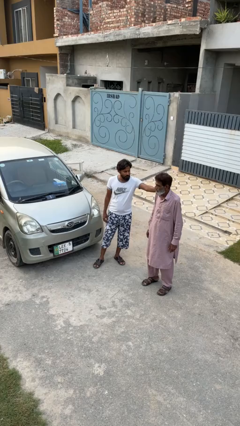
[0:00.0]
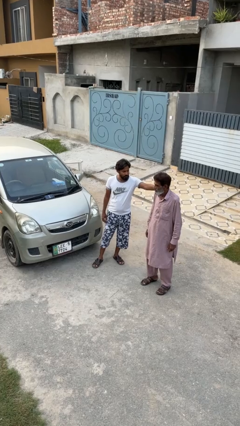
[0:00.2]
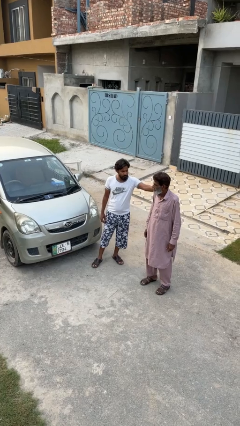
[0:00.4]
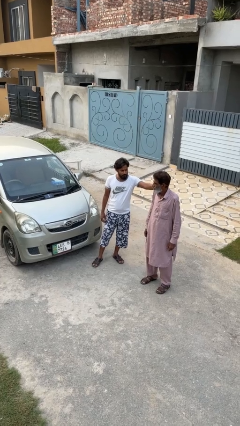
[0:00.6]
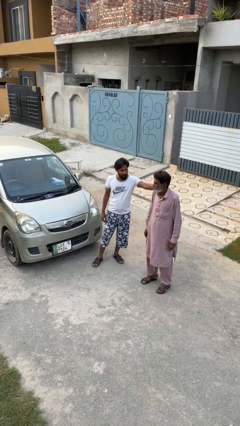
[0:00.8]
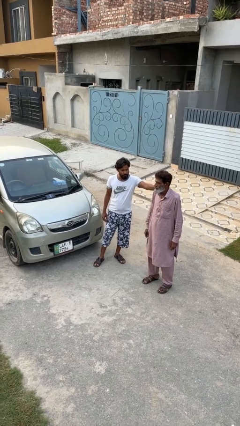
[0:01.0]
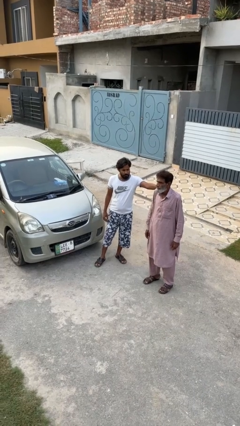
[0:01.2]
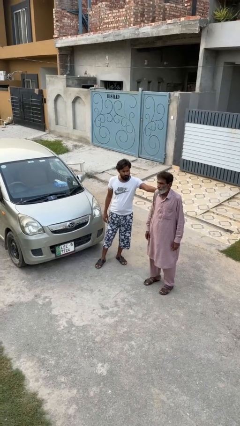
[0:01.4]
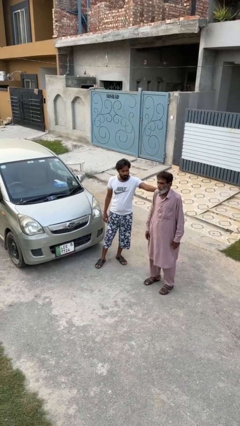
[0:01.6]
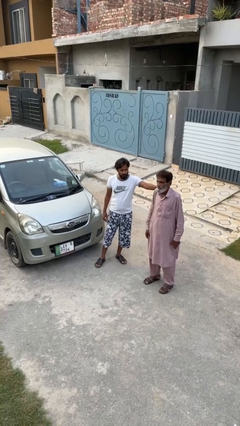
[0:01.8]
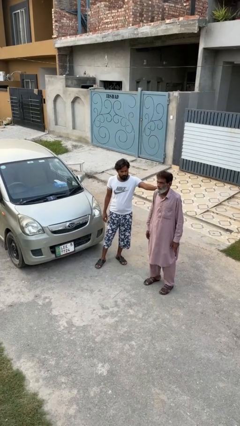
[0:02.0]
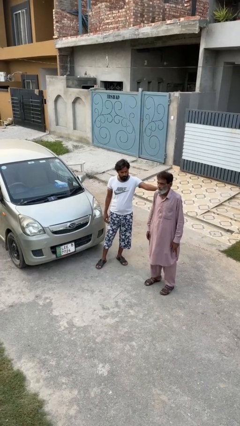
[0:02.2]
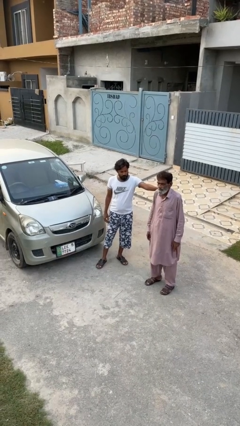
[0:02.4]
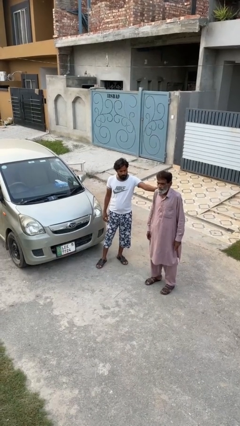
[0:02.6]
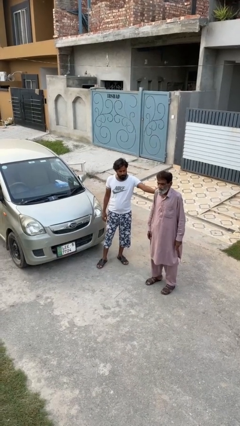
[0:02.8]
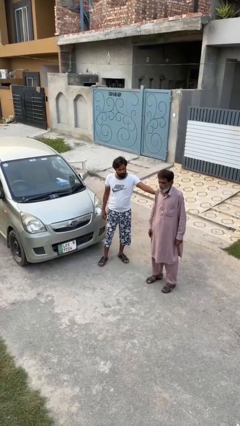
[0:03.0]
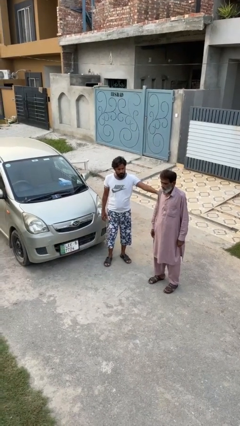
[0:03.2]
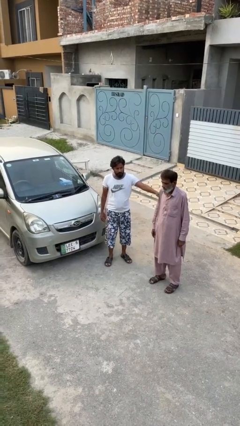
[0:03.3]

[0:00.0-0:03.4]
person pounds shoulders of person

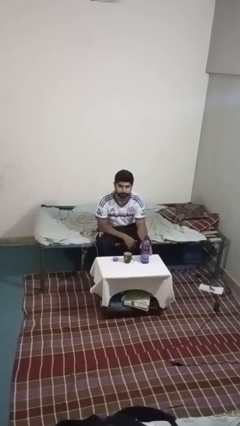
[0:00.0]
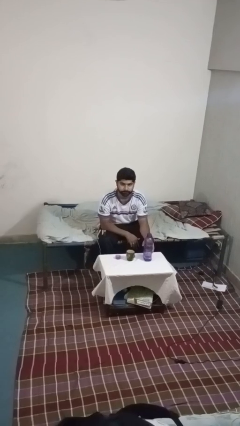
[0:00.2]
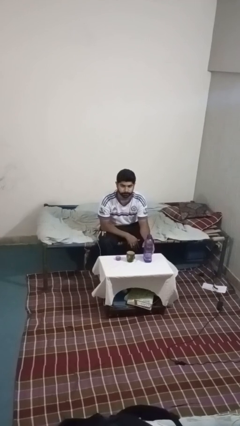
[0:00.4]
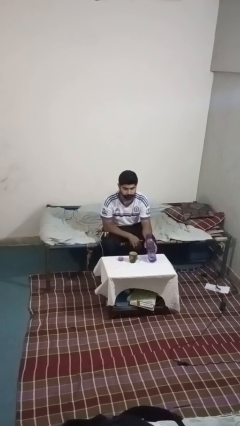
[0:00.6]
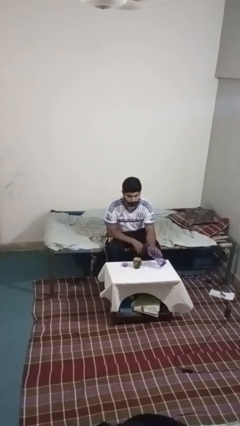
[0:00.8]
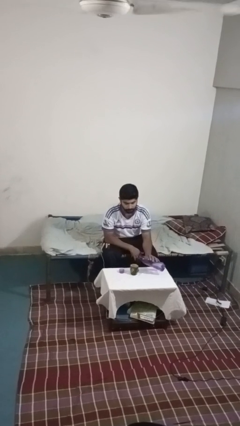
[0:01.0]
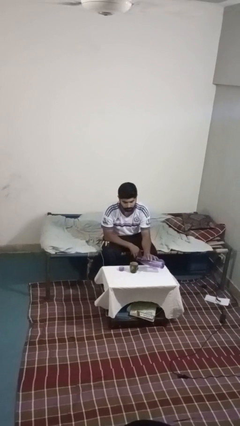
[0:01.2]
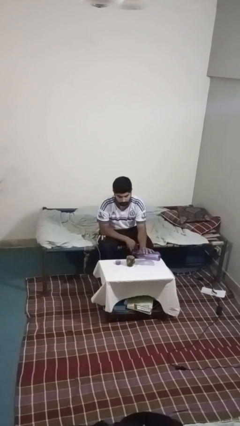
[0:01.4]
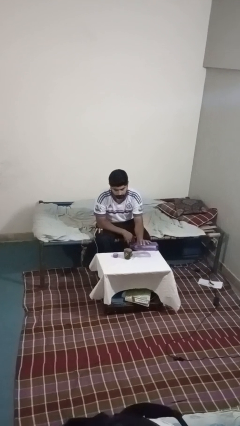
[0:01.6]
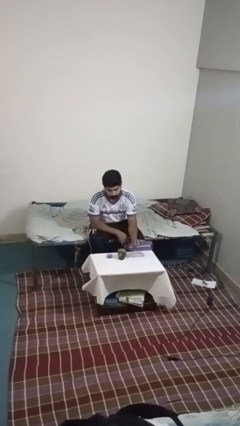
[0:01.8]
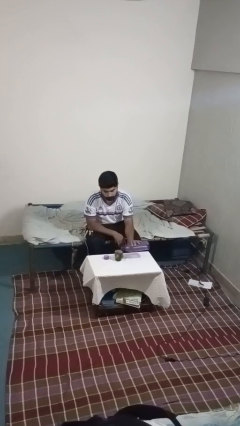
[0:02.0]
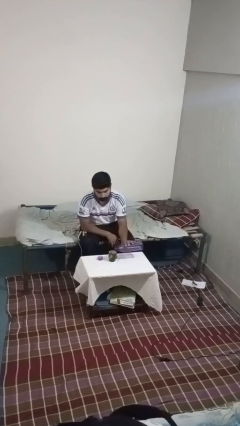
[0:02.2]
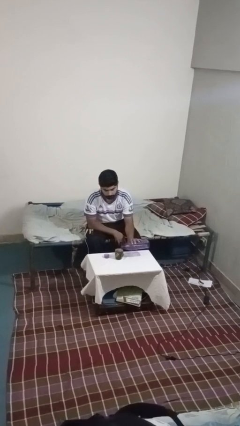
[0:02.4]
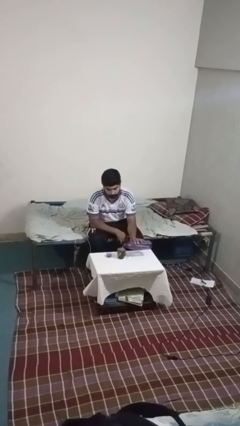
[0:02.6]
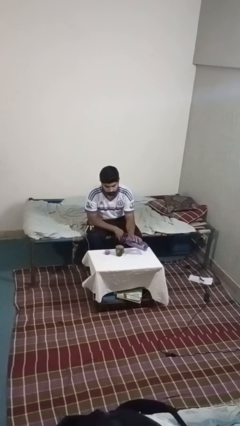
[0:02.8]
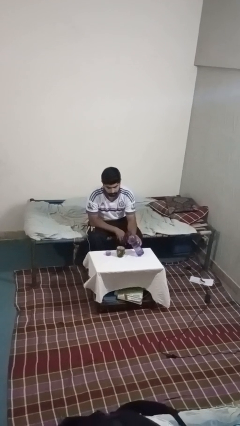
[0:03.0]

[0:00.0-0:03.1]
person pours liquid into cup

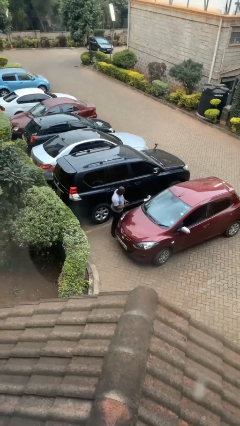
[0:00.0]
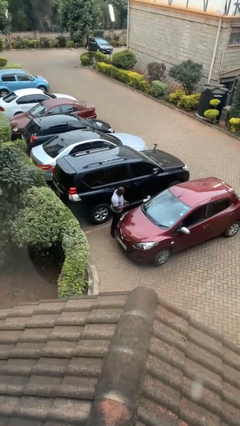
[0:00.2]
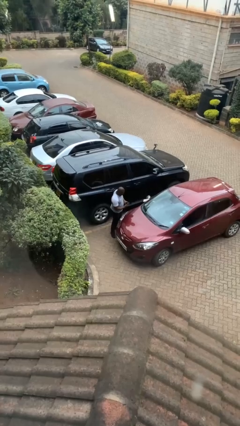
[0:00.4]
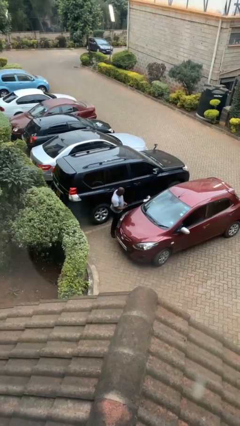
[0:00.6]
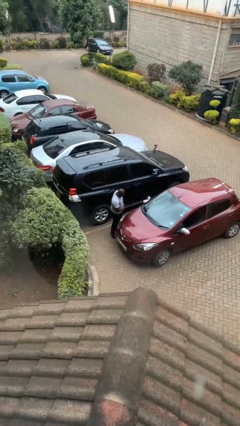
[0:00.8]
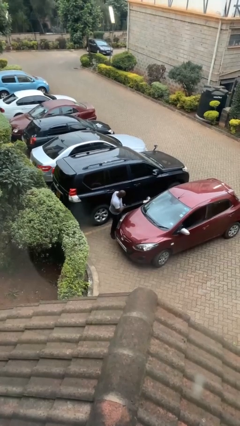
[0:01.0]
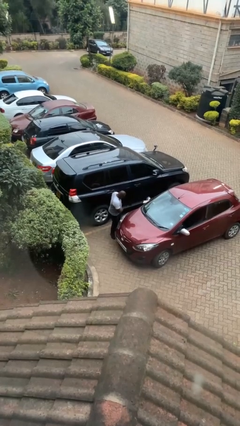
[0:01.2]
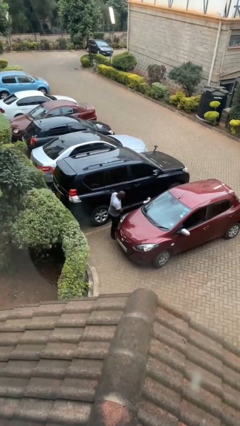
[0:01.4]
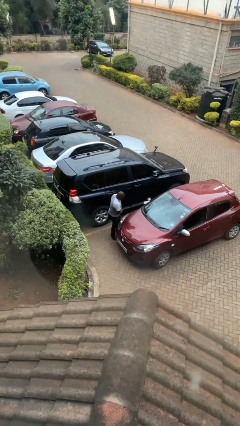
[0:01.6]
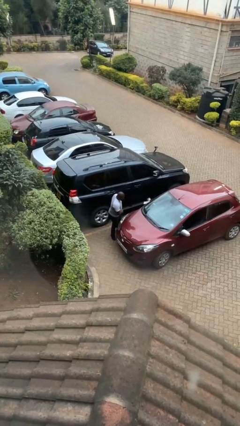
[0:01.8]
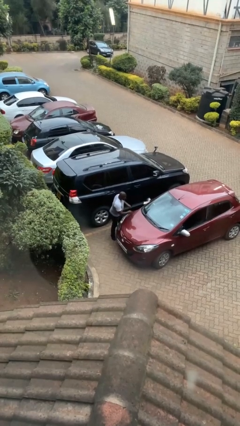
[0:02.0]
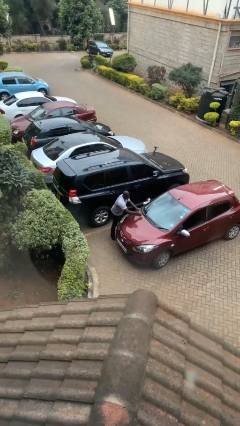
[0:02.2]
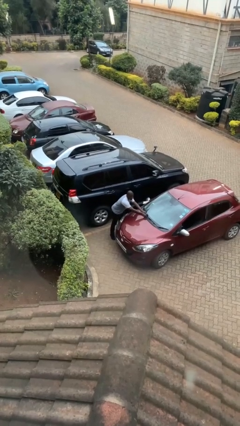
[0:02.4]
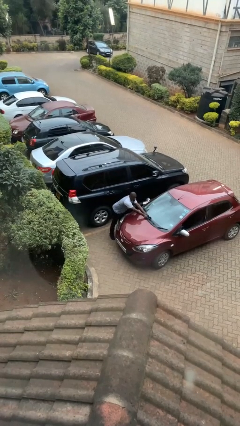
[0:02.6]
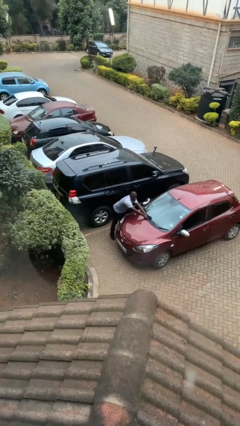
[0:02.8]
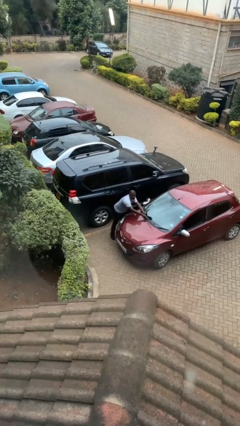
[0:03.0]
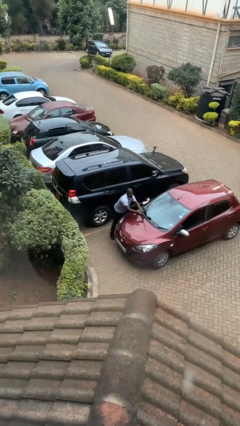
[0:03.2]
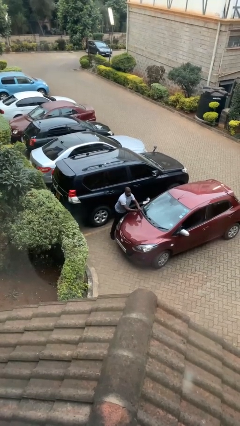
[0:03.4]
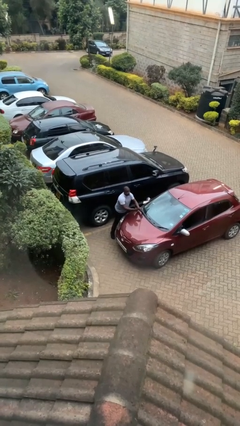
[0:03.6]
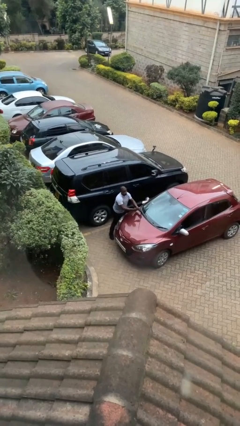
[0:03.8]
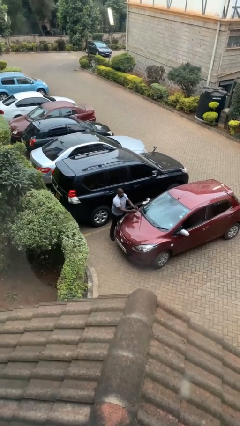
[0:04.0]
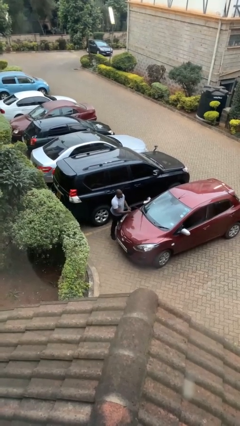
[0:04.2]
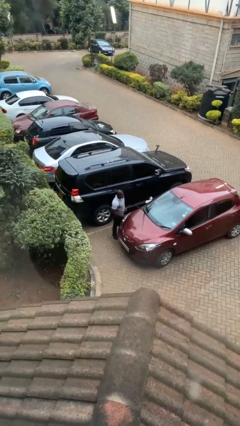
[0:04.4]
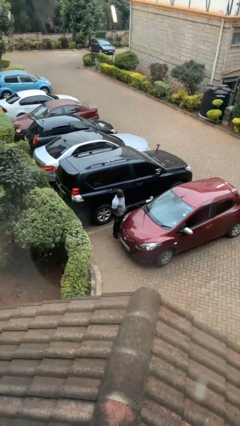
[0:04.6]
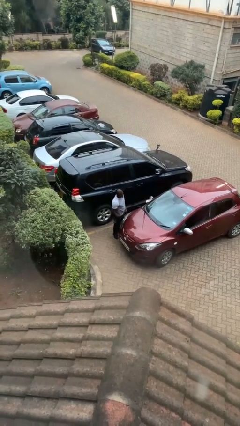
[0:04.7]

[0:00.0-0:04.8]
person flips up car wipers

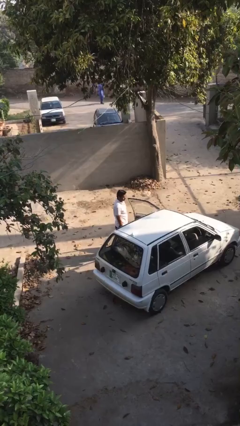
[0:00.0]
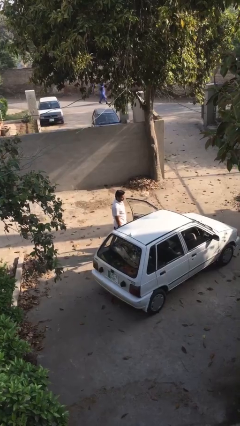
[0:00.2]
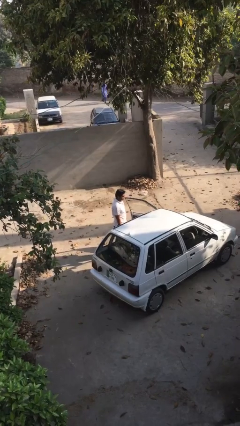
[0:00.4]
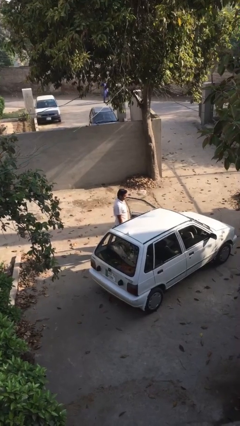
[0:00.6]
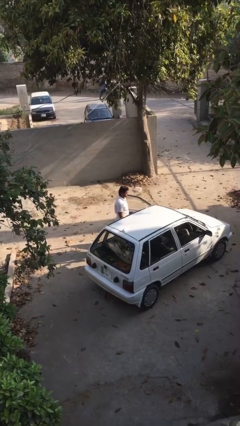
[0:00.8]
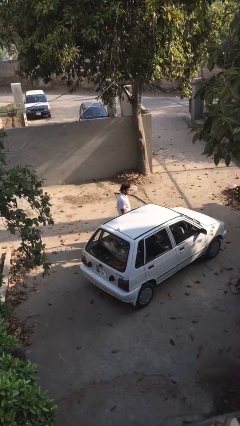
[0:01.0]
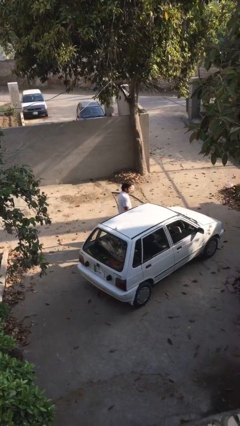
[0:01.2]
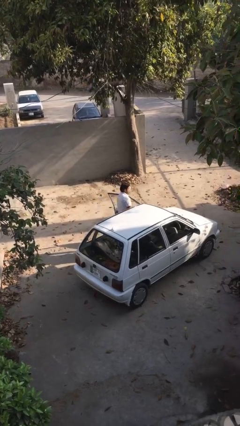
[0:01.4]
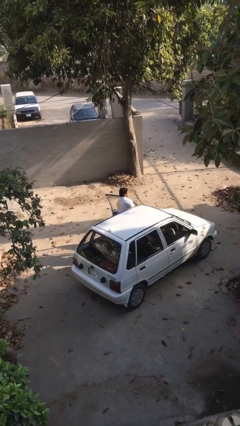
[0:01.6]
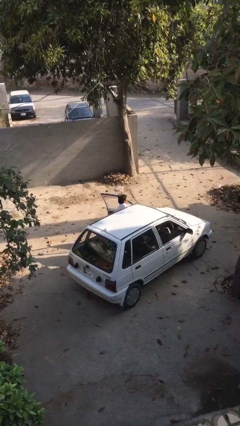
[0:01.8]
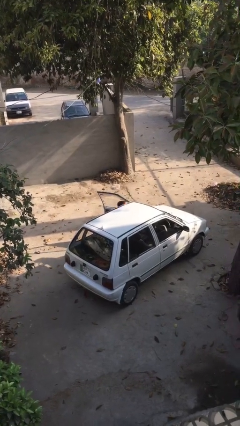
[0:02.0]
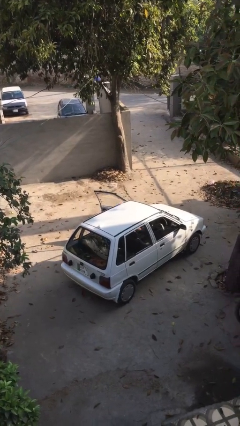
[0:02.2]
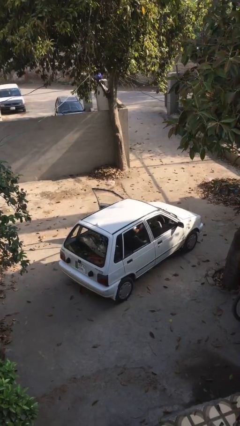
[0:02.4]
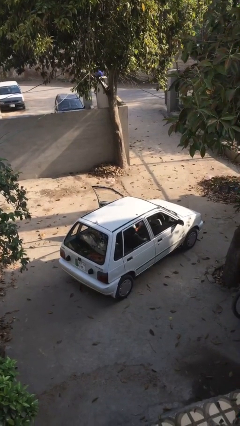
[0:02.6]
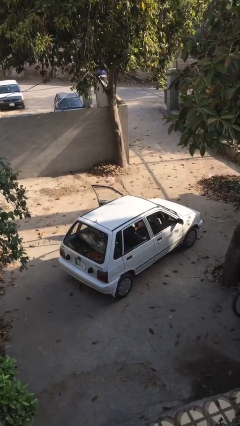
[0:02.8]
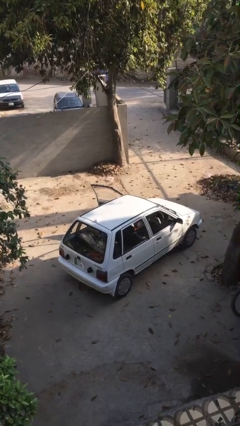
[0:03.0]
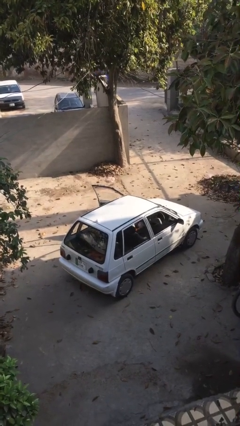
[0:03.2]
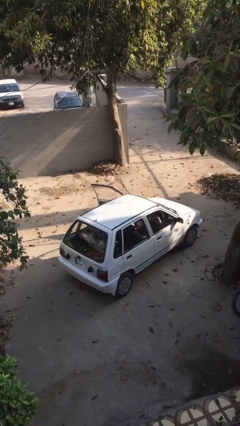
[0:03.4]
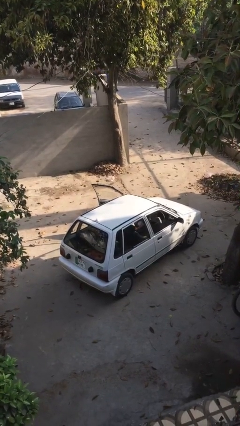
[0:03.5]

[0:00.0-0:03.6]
person enters car

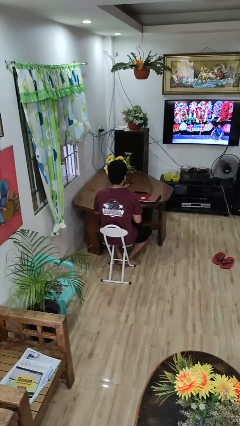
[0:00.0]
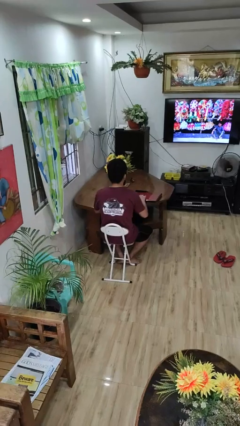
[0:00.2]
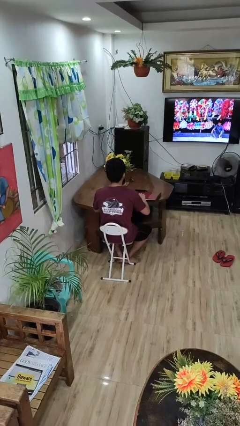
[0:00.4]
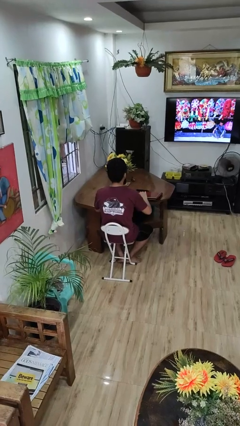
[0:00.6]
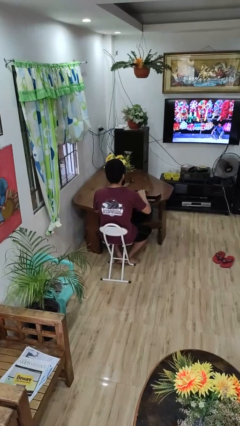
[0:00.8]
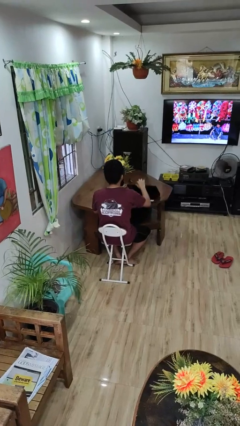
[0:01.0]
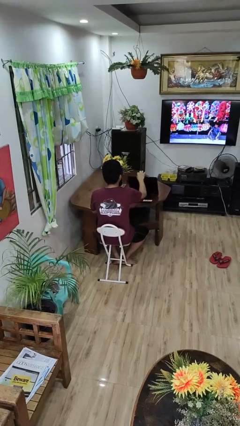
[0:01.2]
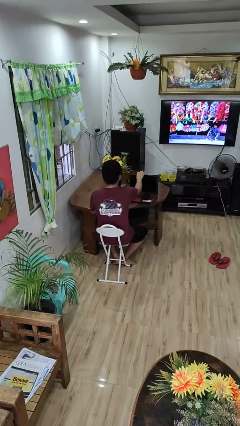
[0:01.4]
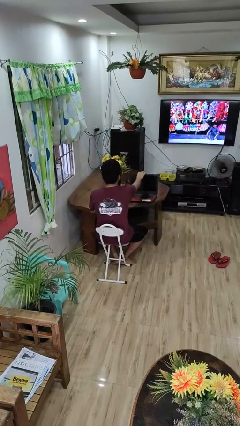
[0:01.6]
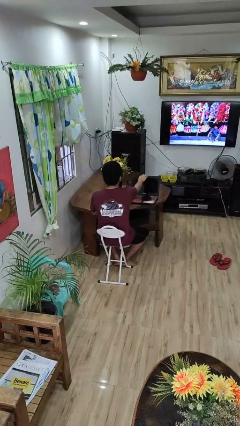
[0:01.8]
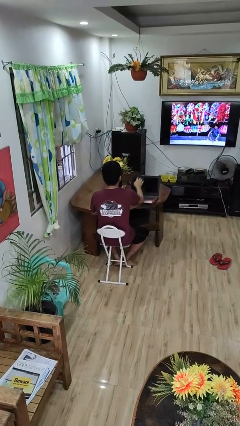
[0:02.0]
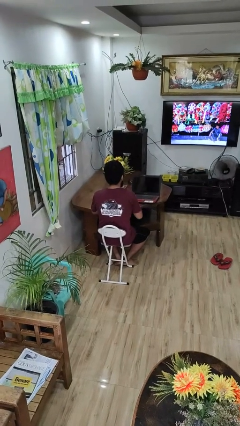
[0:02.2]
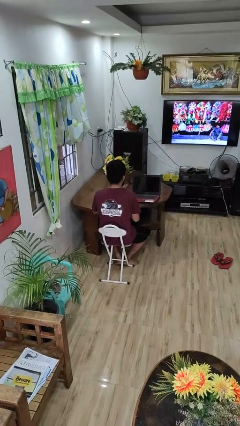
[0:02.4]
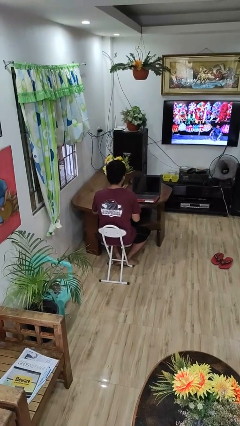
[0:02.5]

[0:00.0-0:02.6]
person opens laptop

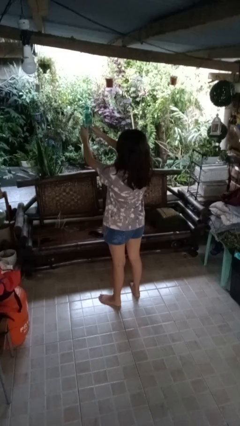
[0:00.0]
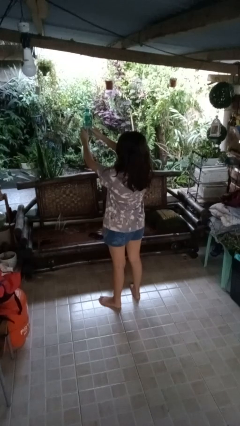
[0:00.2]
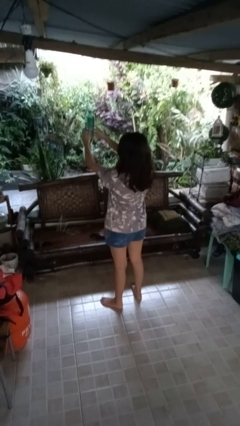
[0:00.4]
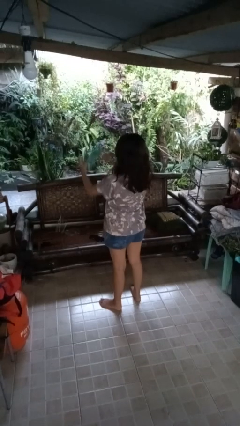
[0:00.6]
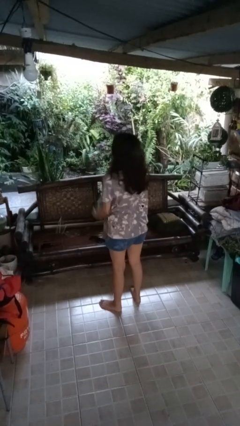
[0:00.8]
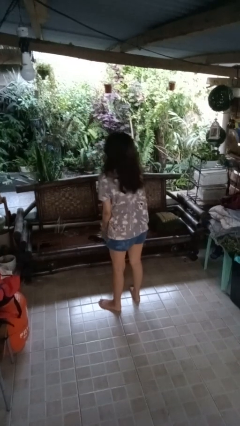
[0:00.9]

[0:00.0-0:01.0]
person drops object
